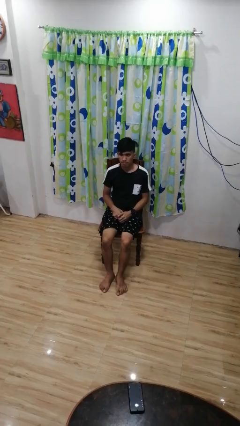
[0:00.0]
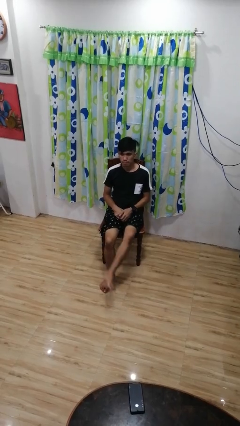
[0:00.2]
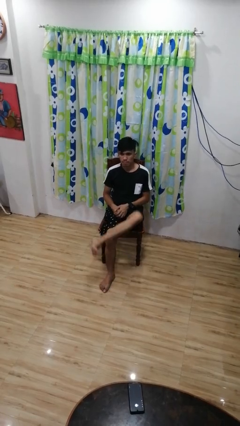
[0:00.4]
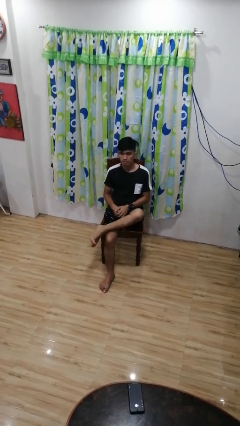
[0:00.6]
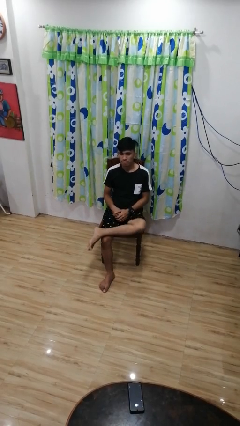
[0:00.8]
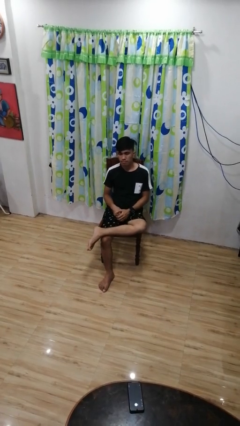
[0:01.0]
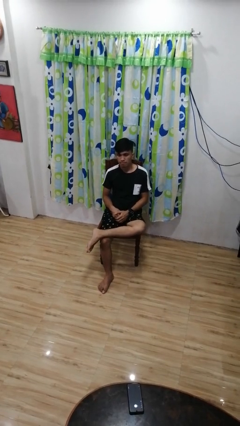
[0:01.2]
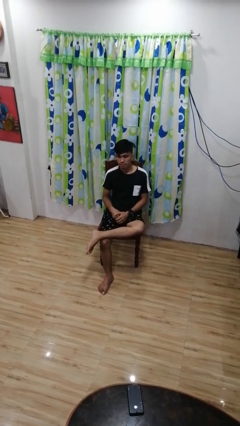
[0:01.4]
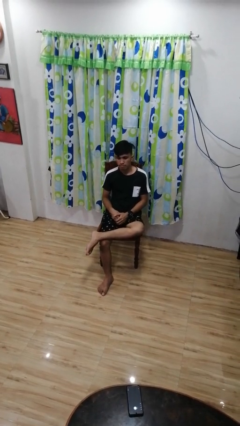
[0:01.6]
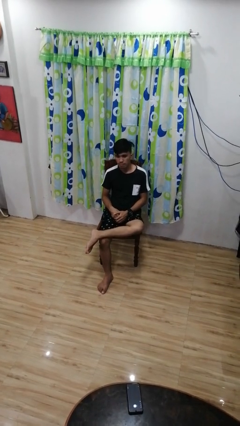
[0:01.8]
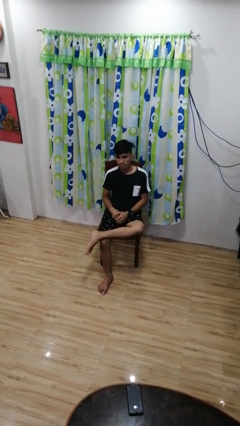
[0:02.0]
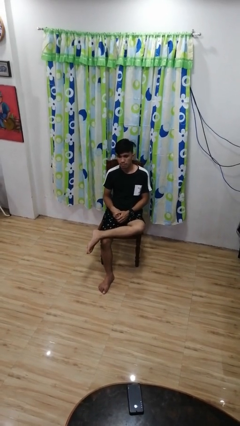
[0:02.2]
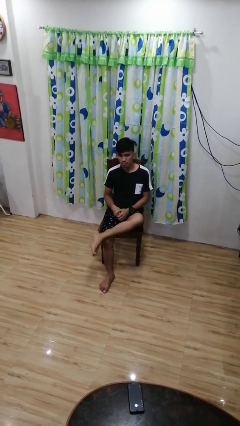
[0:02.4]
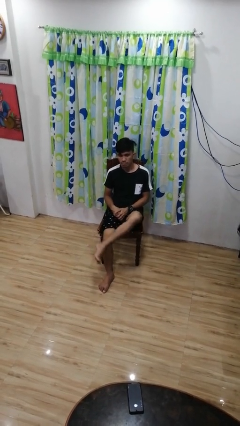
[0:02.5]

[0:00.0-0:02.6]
person crosses legs

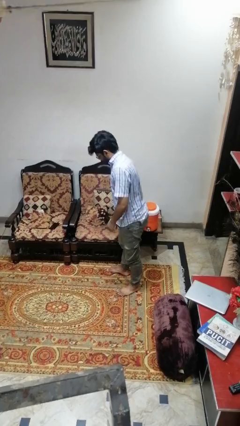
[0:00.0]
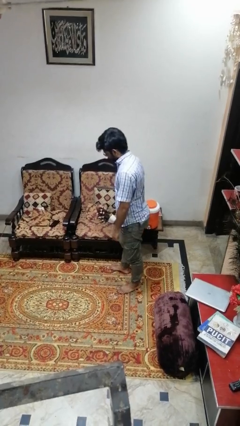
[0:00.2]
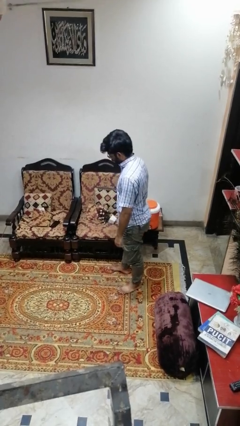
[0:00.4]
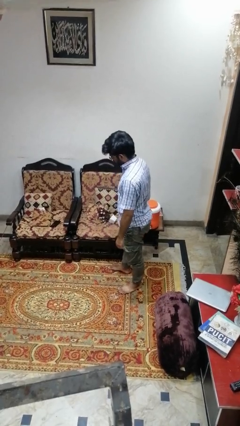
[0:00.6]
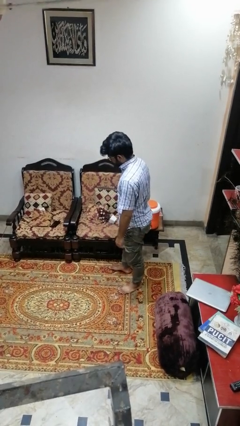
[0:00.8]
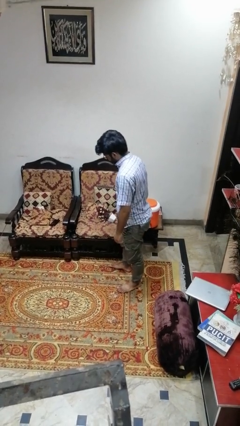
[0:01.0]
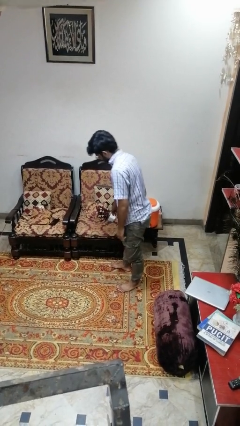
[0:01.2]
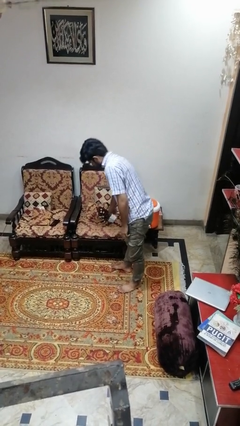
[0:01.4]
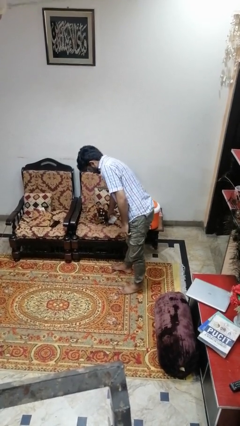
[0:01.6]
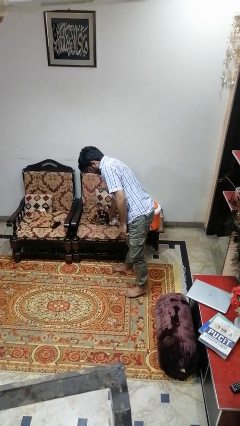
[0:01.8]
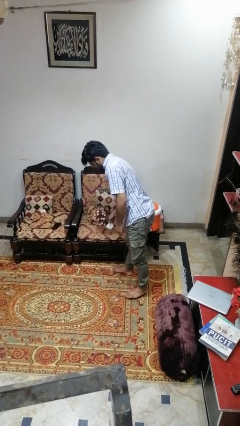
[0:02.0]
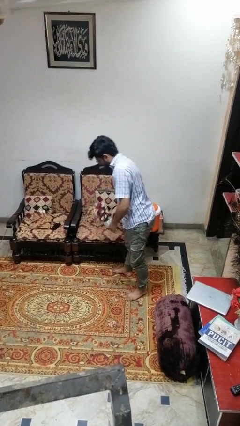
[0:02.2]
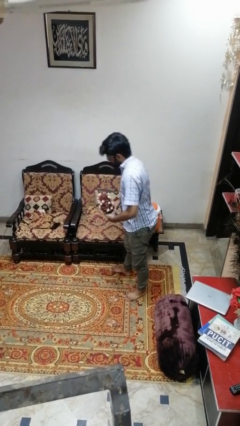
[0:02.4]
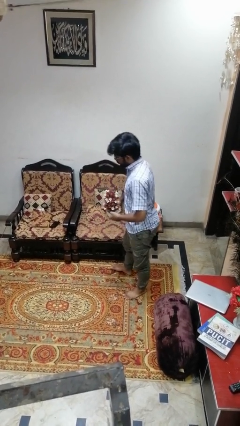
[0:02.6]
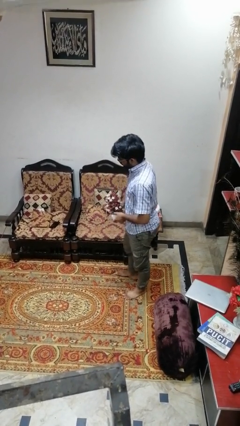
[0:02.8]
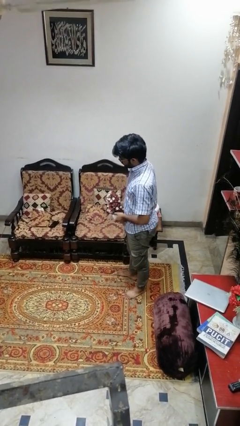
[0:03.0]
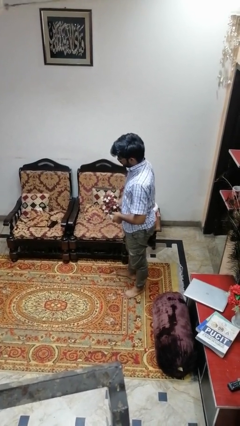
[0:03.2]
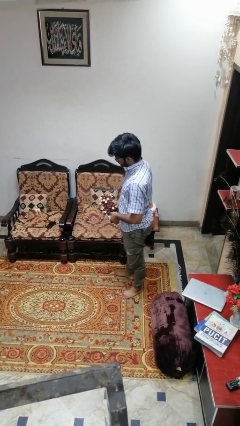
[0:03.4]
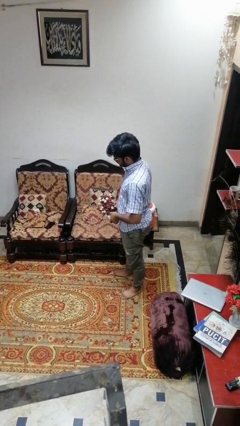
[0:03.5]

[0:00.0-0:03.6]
person picks up object from couch

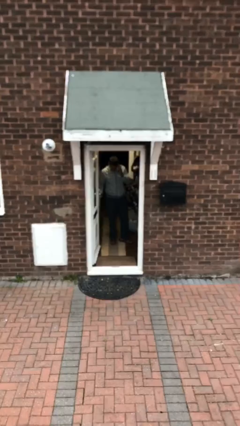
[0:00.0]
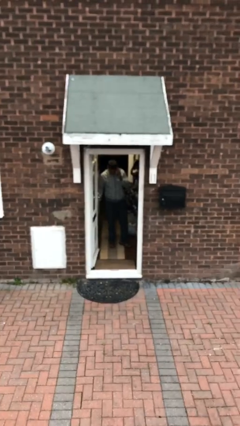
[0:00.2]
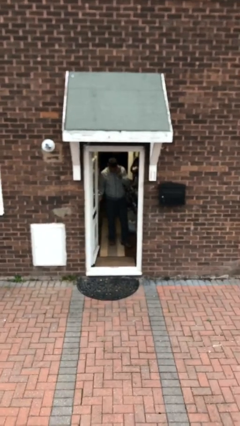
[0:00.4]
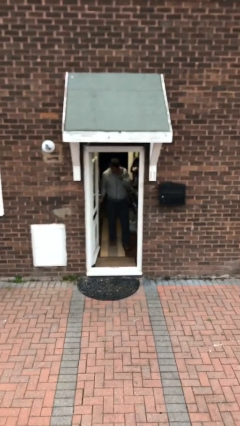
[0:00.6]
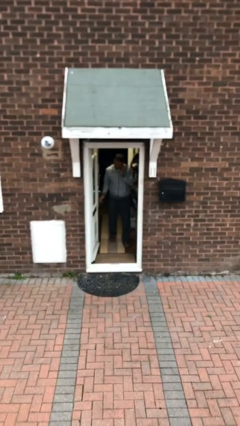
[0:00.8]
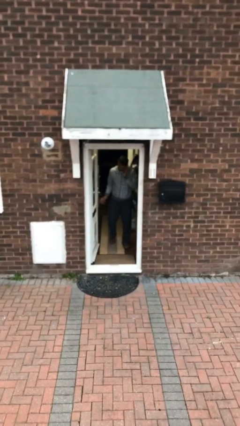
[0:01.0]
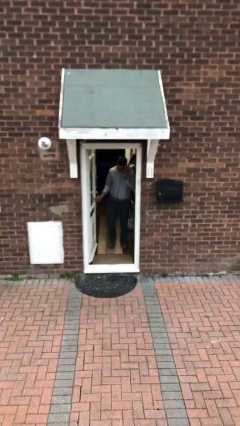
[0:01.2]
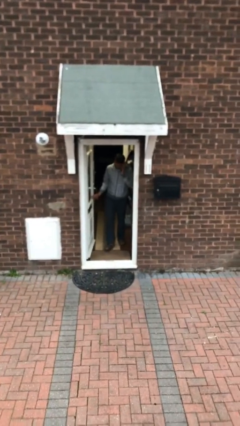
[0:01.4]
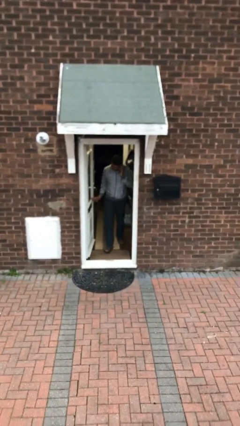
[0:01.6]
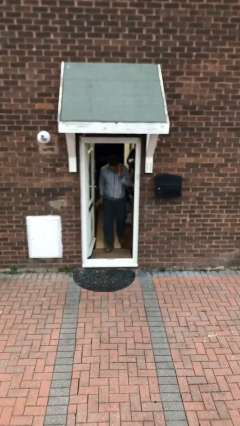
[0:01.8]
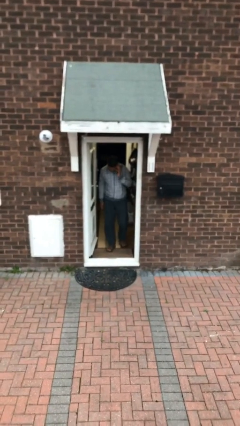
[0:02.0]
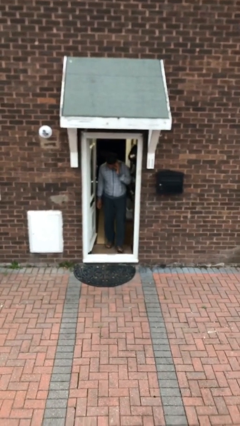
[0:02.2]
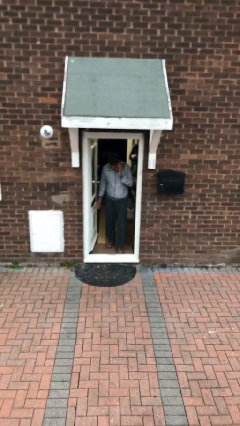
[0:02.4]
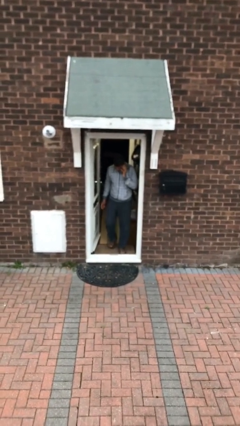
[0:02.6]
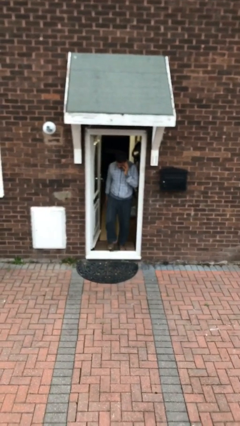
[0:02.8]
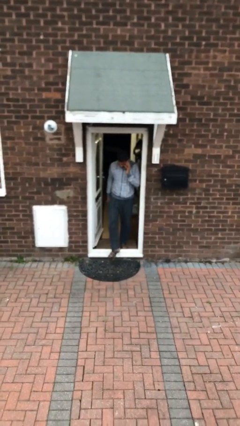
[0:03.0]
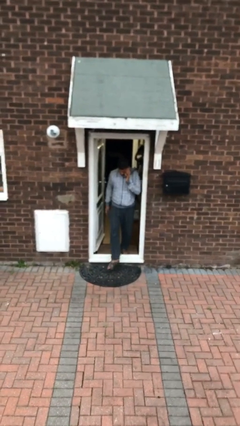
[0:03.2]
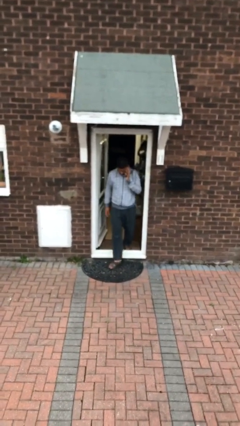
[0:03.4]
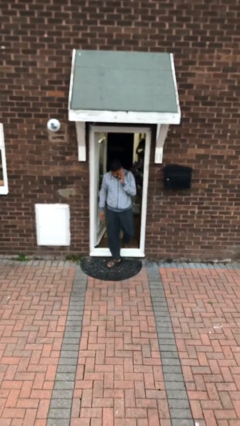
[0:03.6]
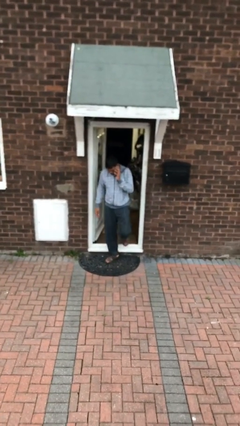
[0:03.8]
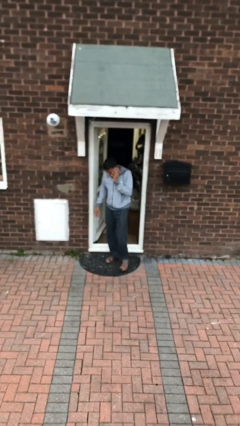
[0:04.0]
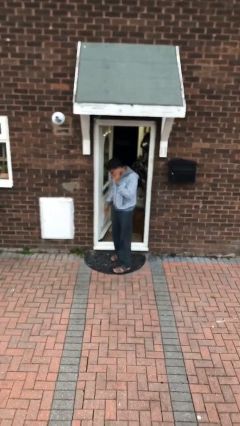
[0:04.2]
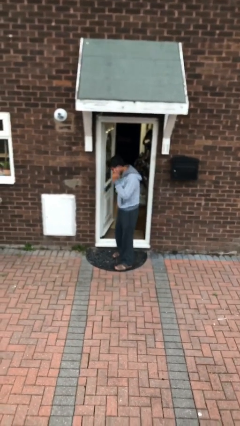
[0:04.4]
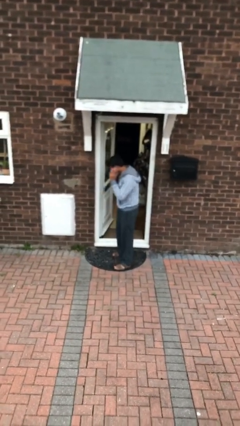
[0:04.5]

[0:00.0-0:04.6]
person enters scene through structure

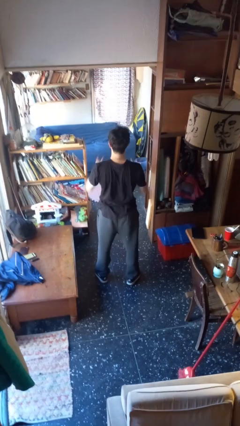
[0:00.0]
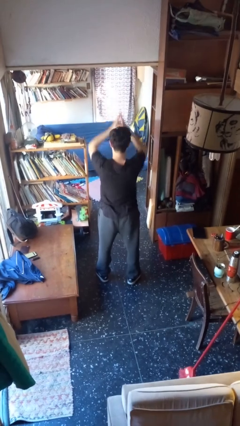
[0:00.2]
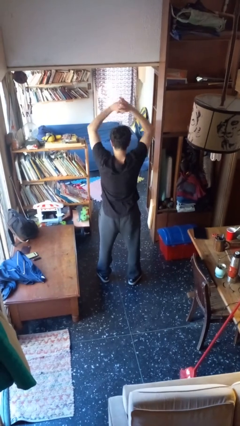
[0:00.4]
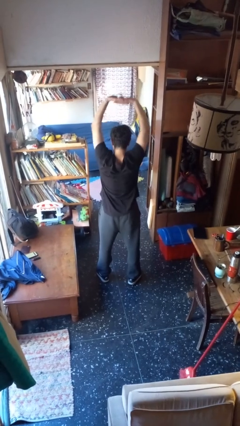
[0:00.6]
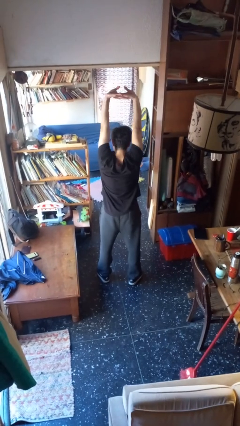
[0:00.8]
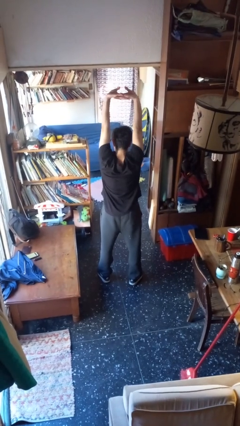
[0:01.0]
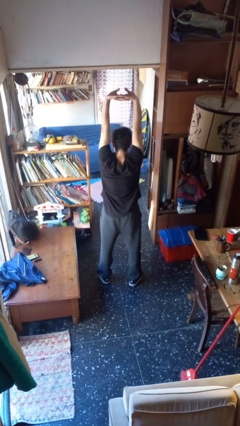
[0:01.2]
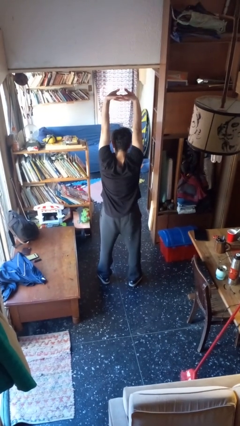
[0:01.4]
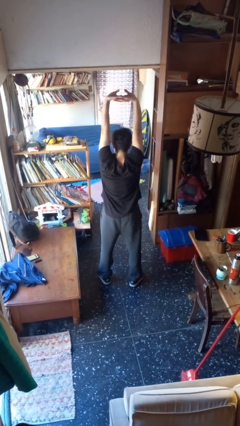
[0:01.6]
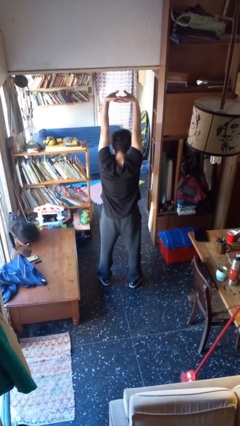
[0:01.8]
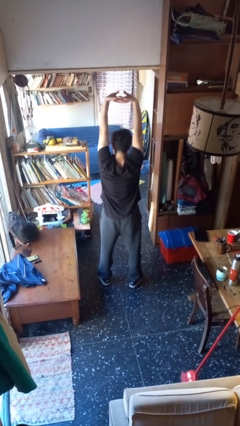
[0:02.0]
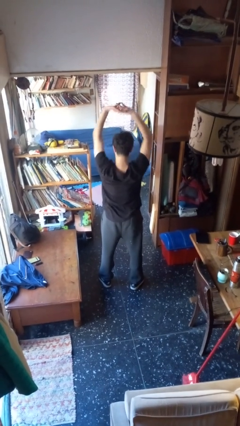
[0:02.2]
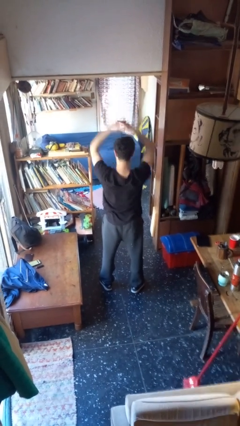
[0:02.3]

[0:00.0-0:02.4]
person stretches arms over head

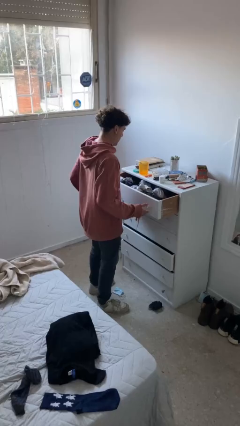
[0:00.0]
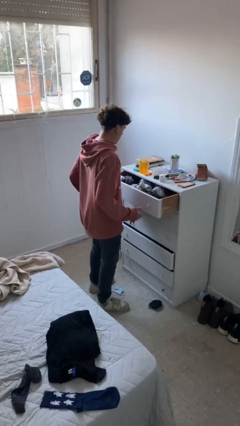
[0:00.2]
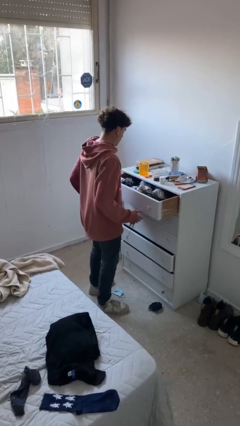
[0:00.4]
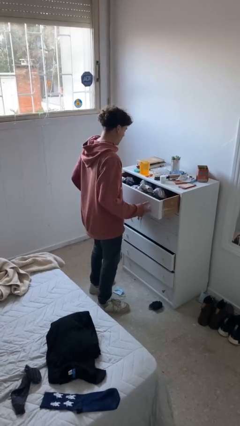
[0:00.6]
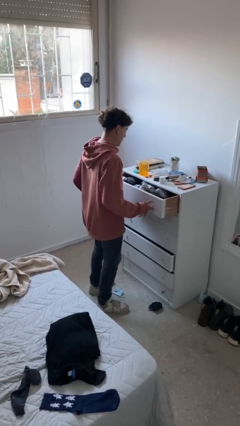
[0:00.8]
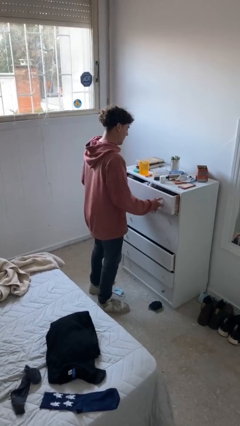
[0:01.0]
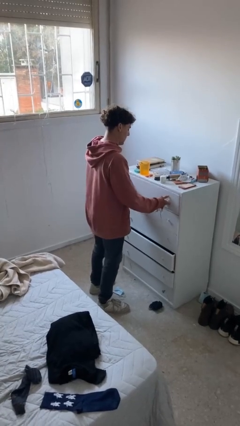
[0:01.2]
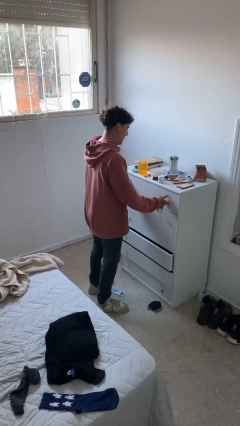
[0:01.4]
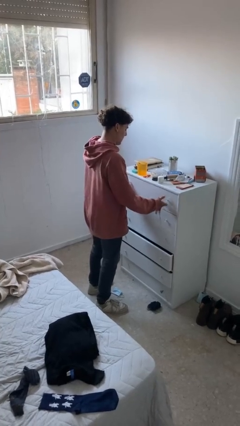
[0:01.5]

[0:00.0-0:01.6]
person closes dresser drawer

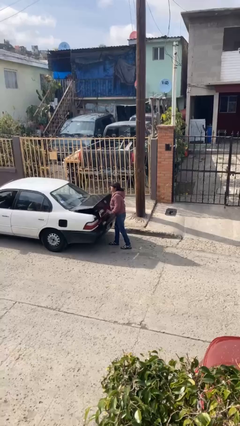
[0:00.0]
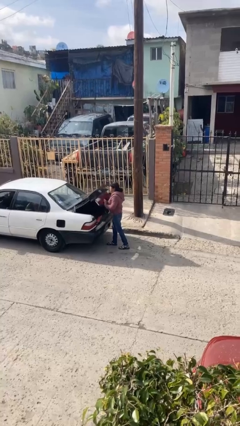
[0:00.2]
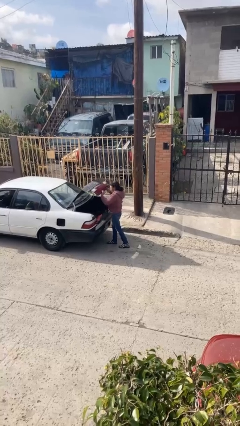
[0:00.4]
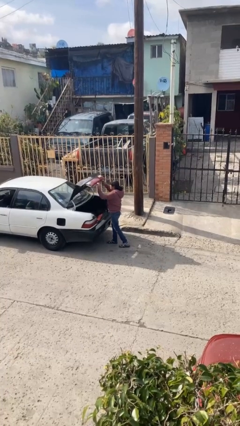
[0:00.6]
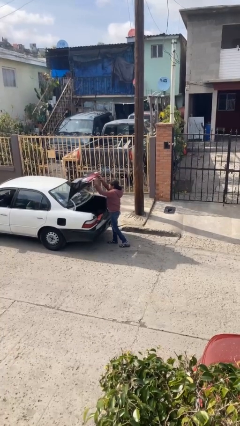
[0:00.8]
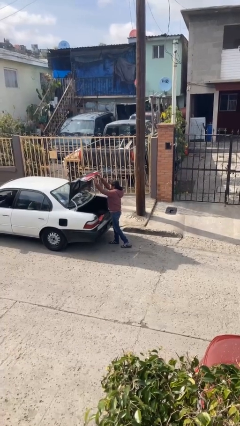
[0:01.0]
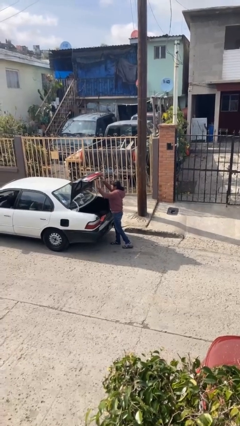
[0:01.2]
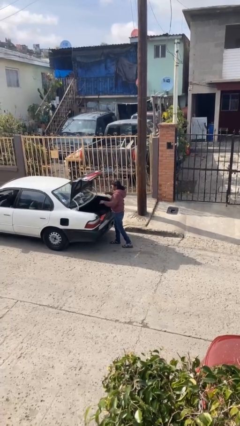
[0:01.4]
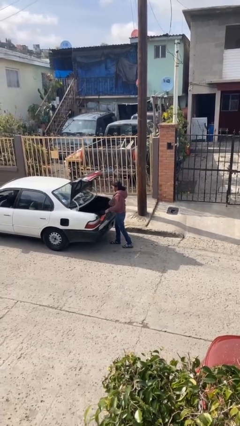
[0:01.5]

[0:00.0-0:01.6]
person opens car trunk

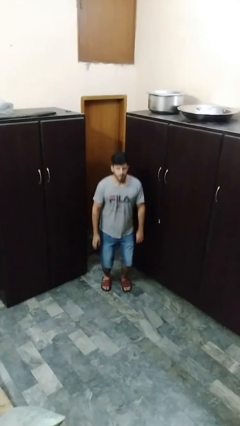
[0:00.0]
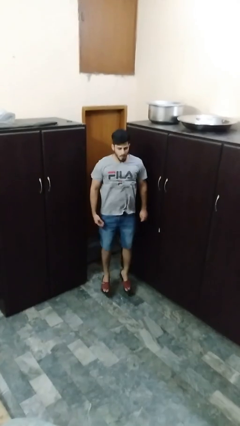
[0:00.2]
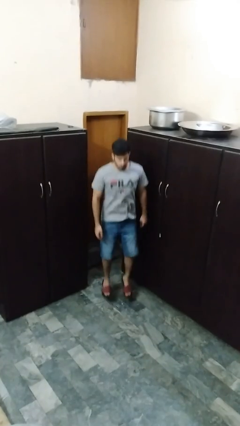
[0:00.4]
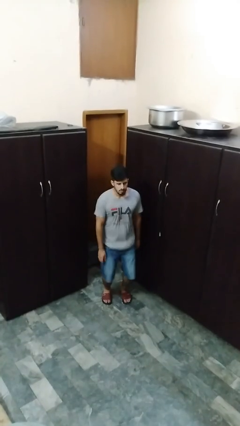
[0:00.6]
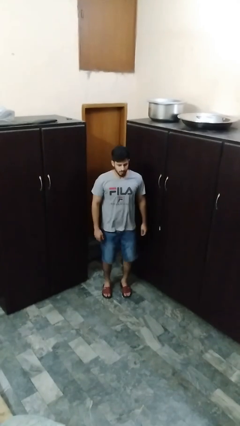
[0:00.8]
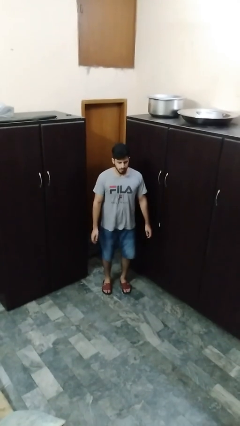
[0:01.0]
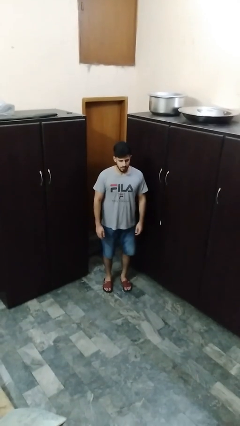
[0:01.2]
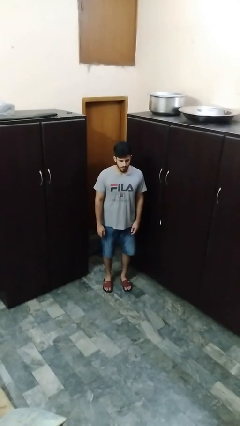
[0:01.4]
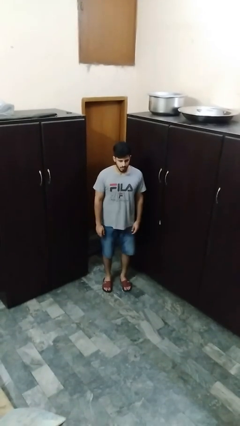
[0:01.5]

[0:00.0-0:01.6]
person jumps
